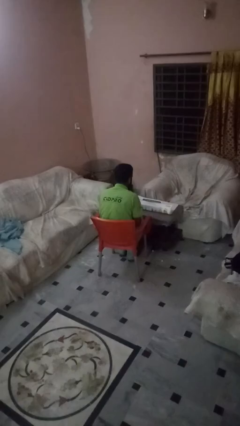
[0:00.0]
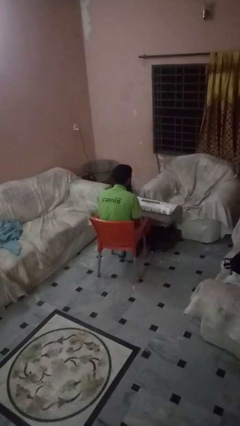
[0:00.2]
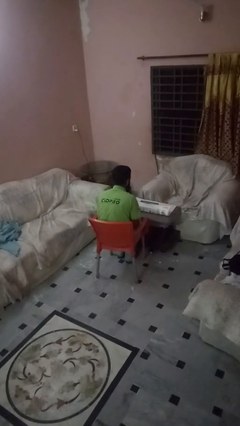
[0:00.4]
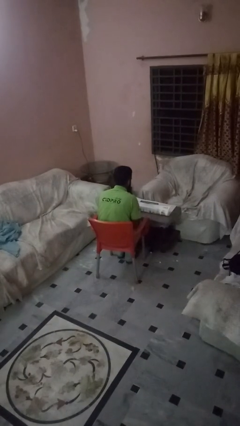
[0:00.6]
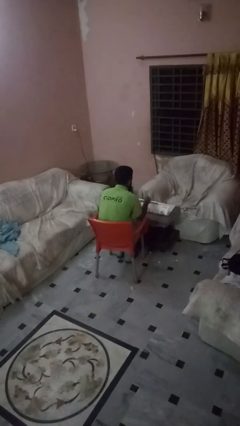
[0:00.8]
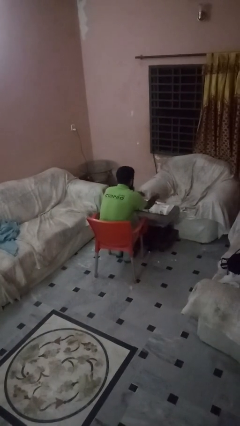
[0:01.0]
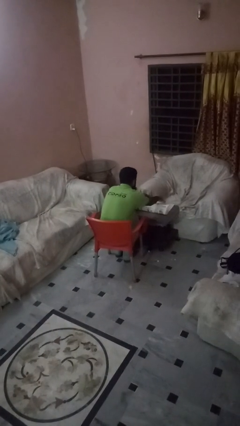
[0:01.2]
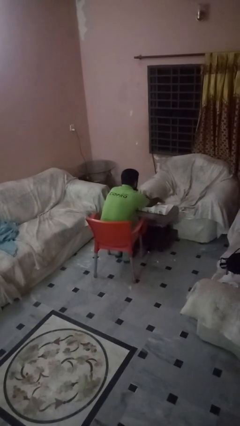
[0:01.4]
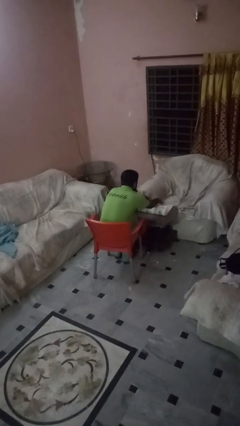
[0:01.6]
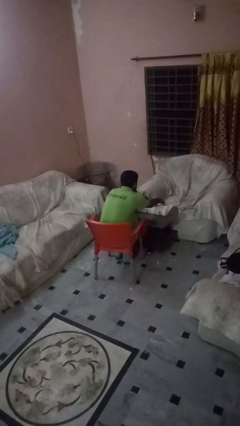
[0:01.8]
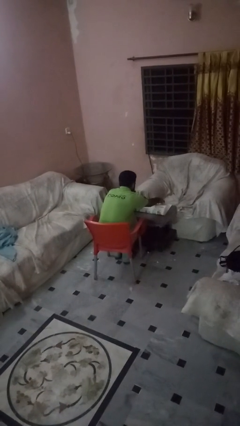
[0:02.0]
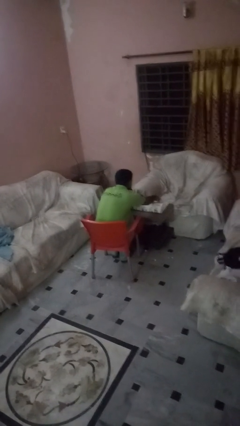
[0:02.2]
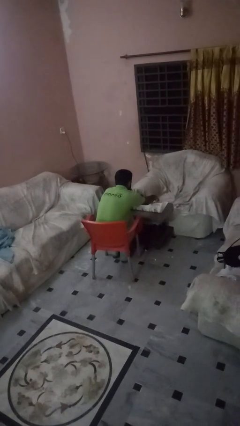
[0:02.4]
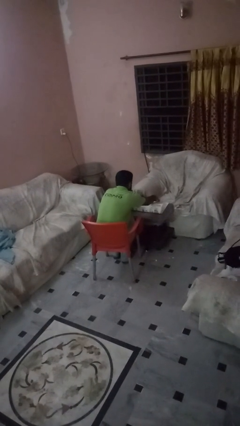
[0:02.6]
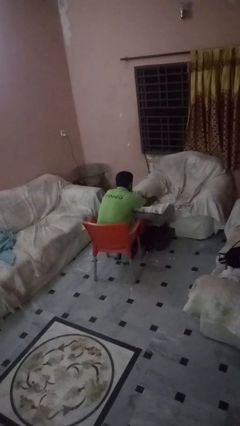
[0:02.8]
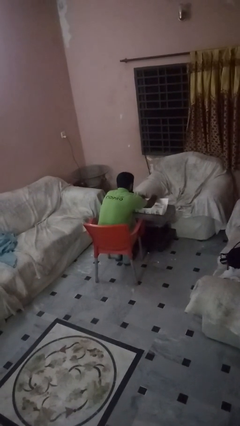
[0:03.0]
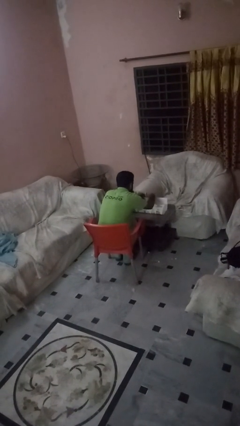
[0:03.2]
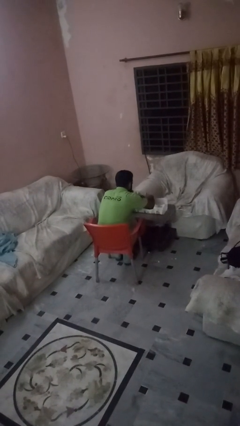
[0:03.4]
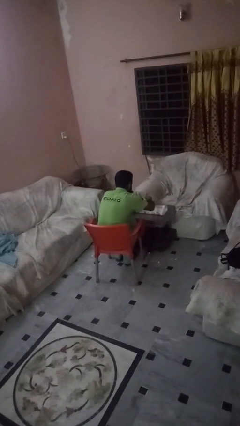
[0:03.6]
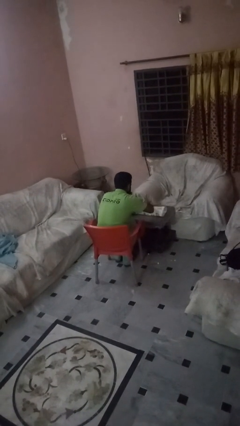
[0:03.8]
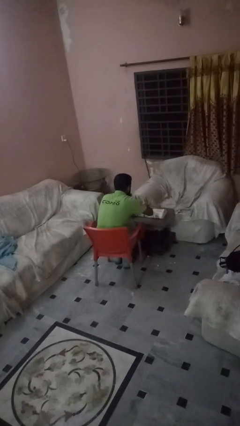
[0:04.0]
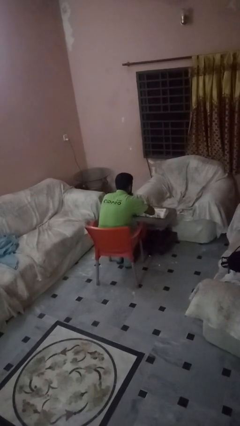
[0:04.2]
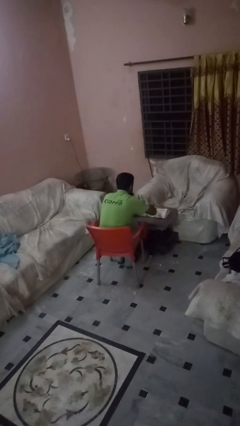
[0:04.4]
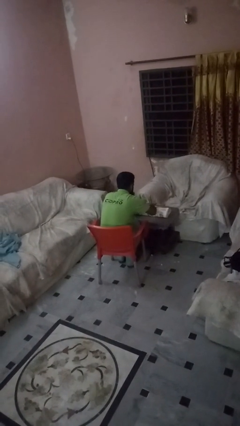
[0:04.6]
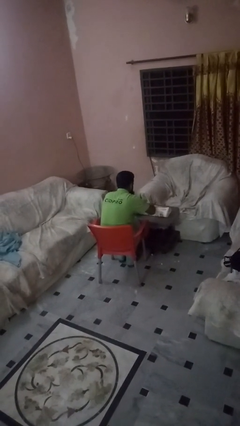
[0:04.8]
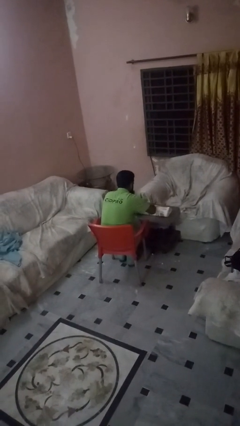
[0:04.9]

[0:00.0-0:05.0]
person wraps box

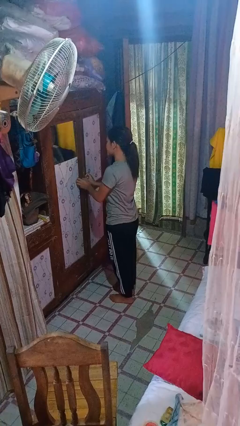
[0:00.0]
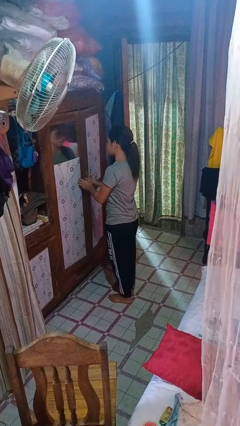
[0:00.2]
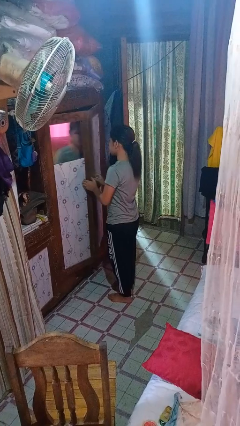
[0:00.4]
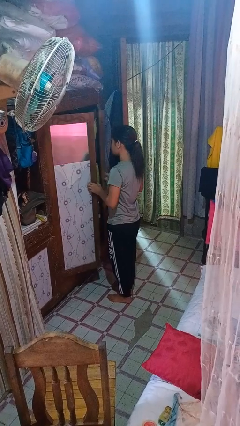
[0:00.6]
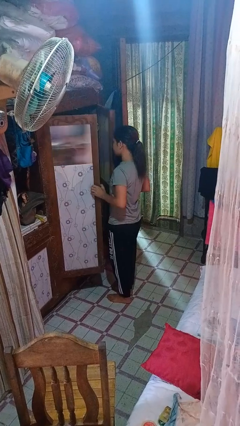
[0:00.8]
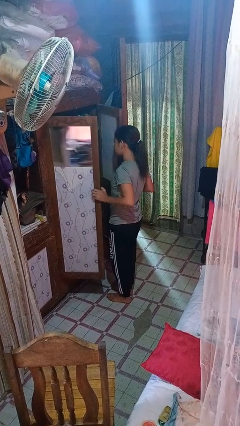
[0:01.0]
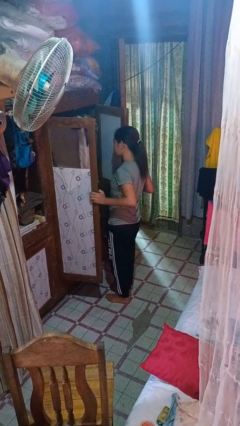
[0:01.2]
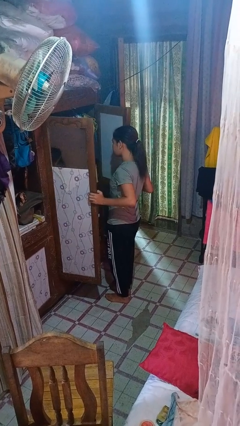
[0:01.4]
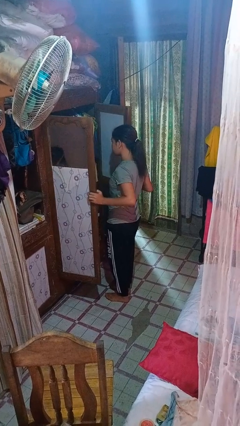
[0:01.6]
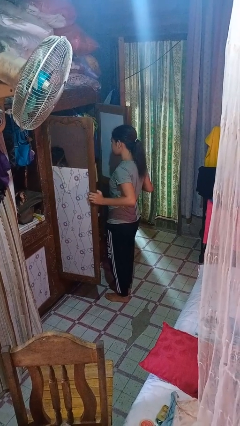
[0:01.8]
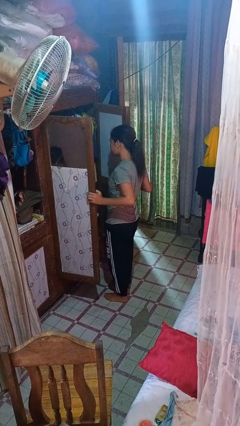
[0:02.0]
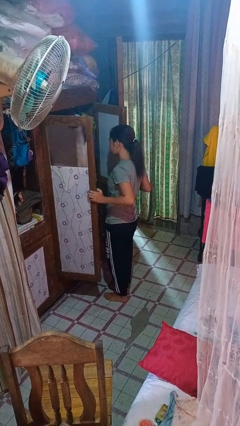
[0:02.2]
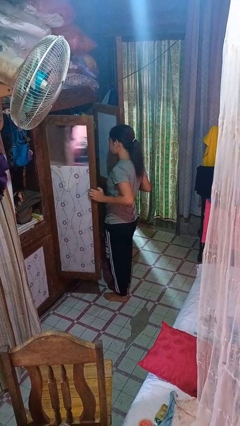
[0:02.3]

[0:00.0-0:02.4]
person opens closet door

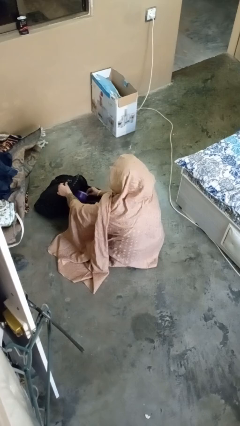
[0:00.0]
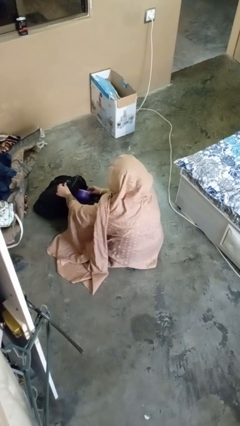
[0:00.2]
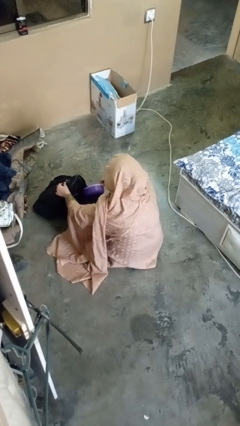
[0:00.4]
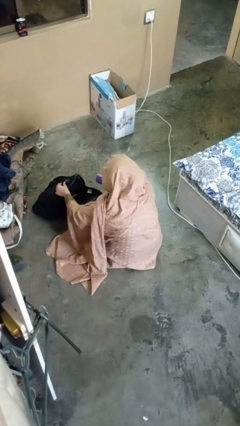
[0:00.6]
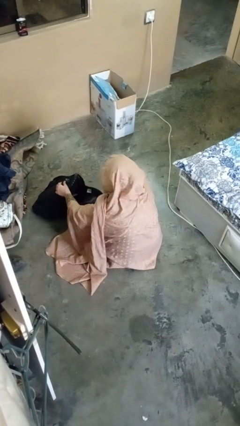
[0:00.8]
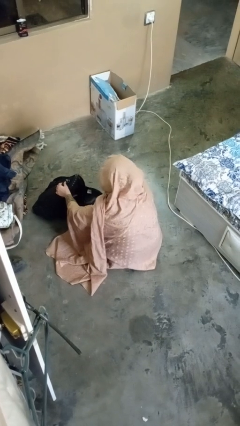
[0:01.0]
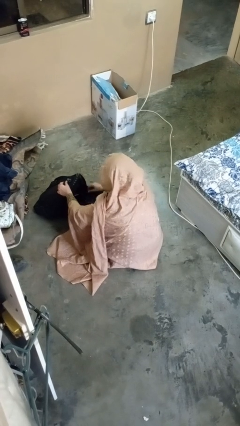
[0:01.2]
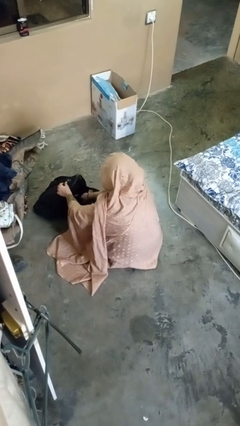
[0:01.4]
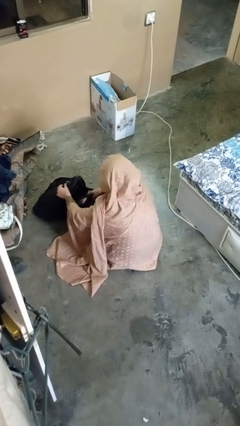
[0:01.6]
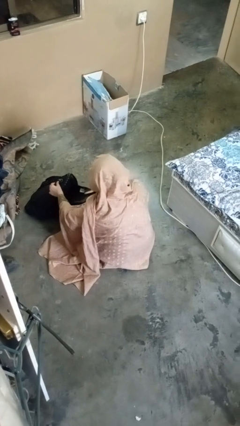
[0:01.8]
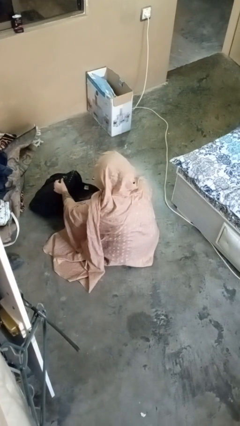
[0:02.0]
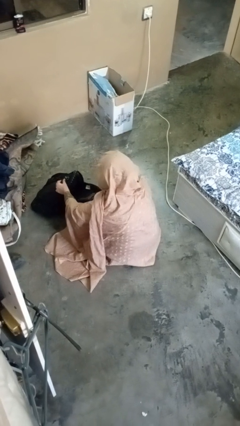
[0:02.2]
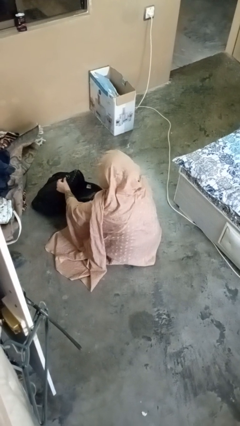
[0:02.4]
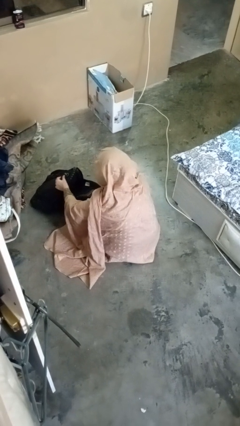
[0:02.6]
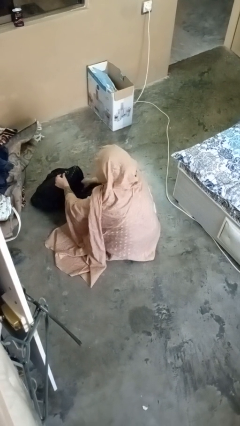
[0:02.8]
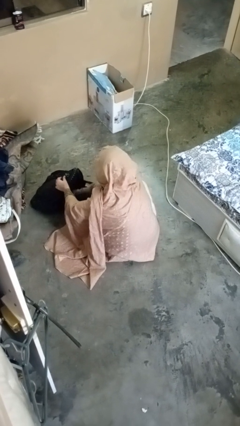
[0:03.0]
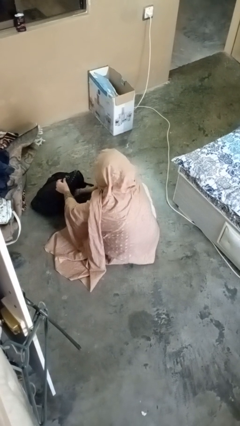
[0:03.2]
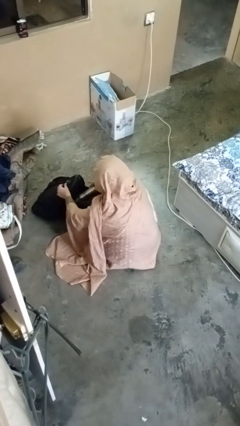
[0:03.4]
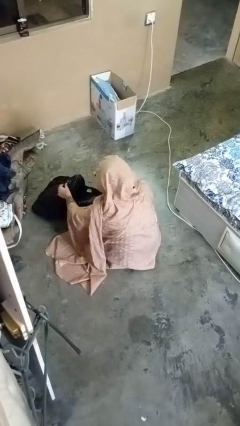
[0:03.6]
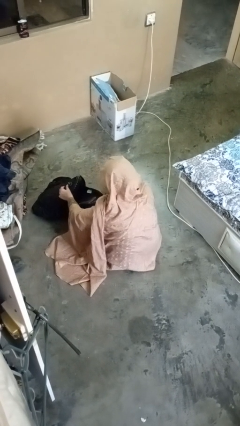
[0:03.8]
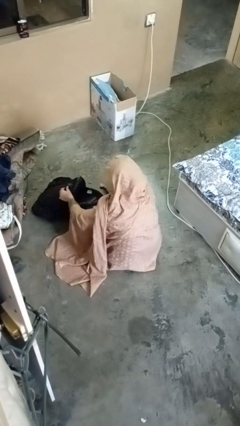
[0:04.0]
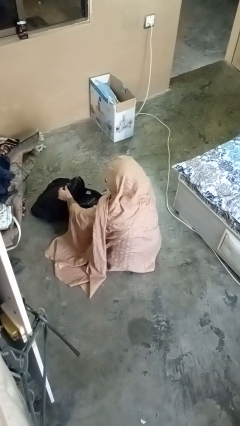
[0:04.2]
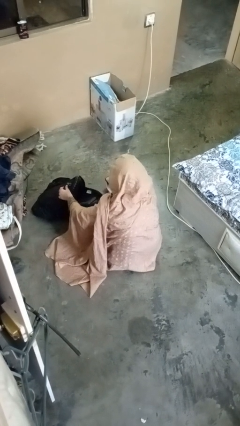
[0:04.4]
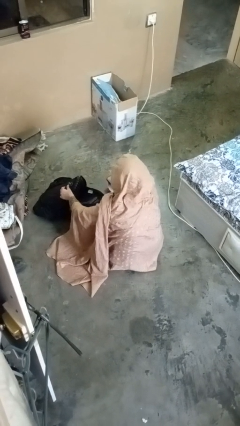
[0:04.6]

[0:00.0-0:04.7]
person takes object from backpack

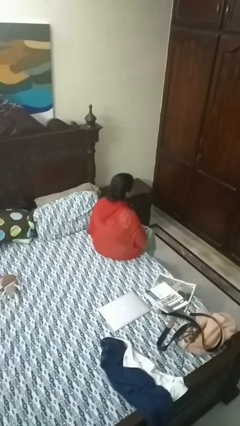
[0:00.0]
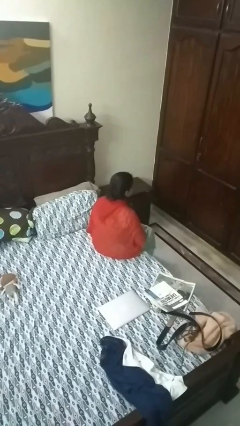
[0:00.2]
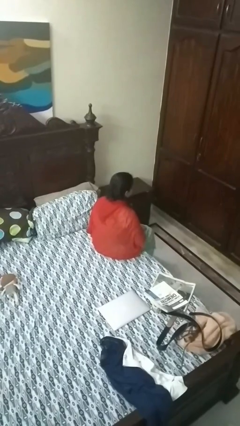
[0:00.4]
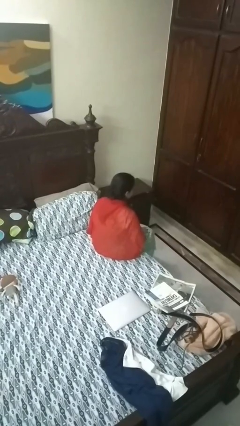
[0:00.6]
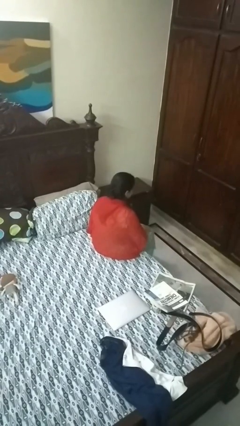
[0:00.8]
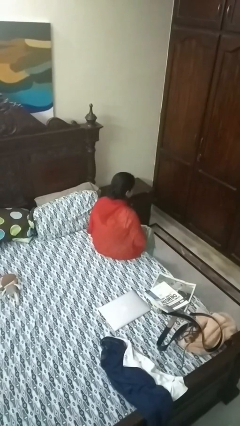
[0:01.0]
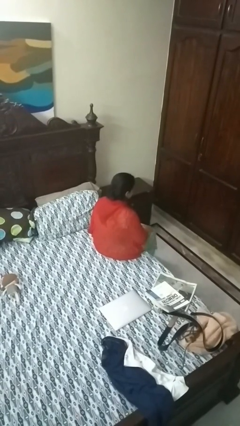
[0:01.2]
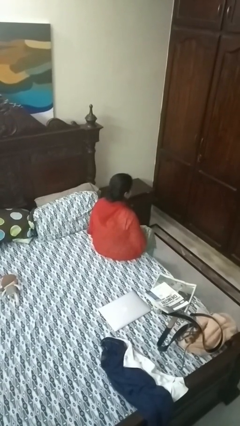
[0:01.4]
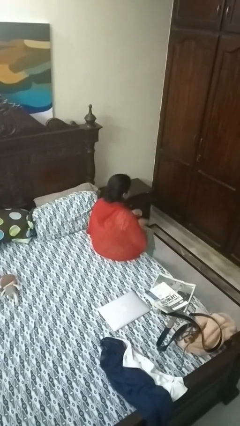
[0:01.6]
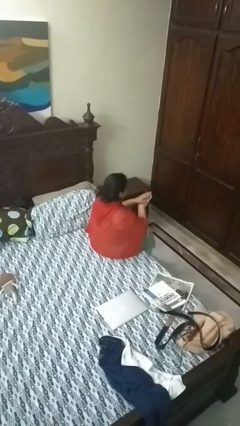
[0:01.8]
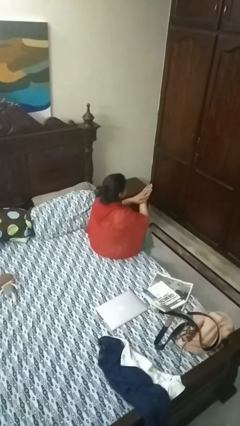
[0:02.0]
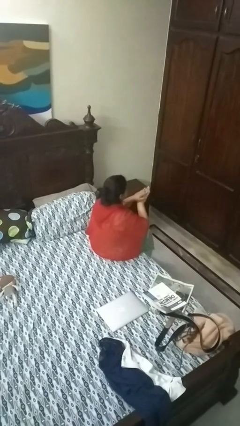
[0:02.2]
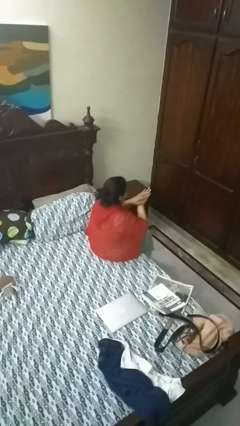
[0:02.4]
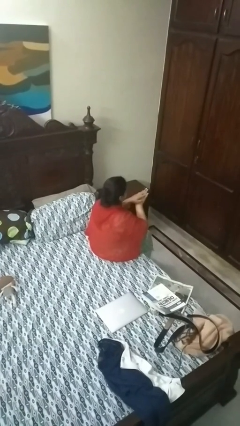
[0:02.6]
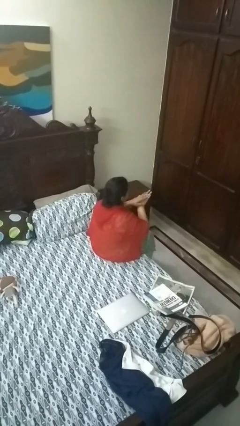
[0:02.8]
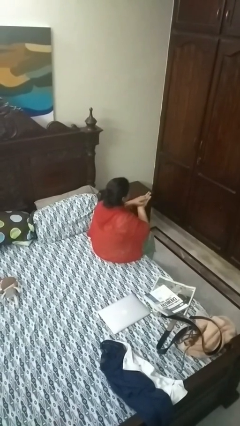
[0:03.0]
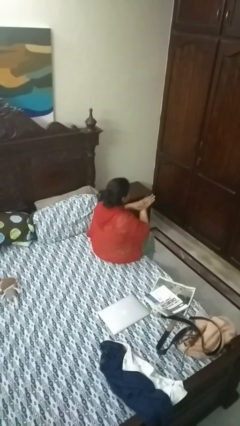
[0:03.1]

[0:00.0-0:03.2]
person looks at hands in lap

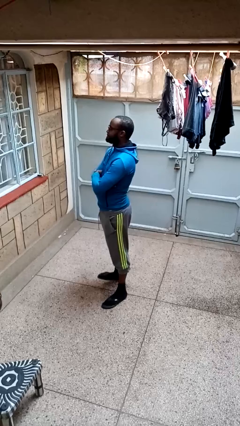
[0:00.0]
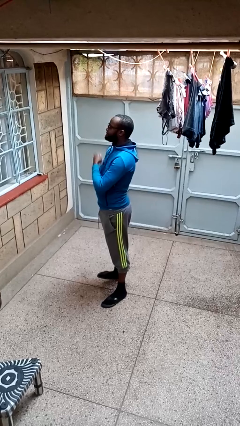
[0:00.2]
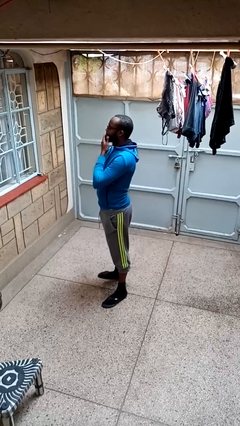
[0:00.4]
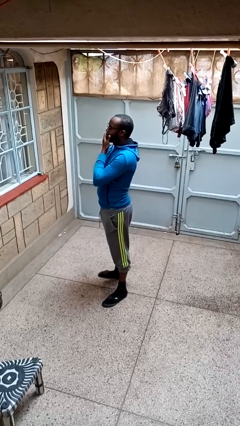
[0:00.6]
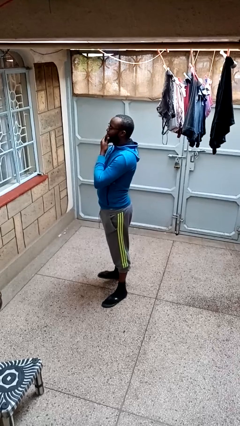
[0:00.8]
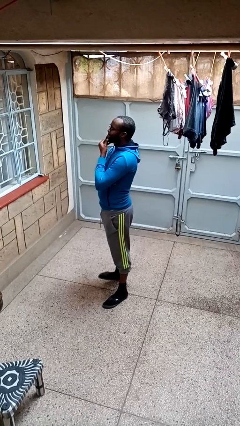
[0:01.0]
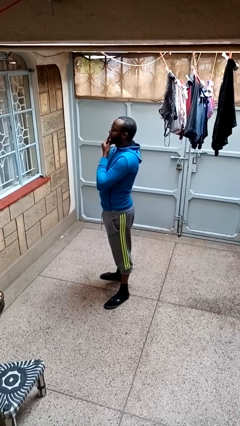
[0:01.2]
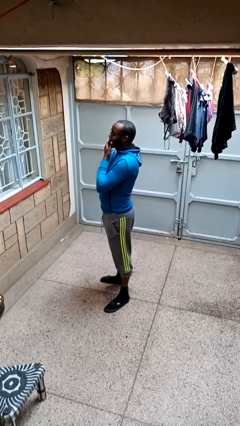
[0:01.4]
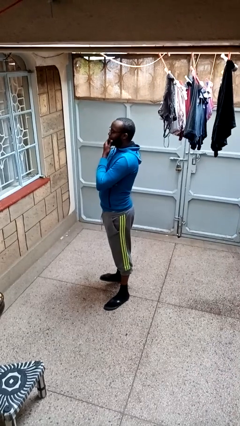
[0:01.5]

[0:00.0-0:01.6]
person strokes chin

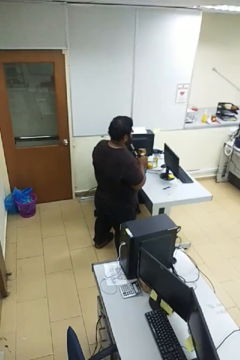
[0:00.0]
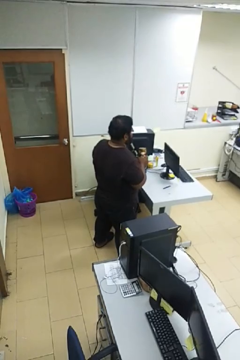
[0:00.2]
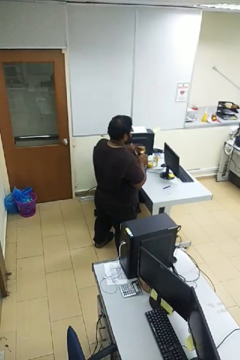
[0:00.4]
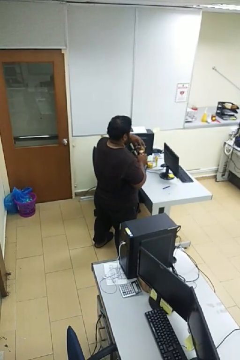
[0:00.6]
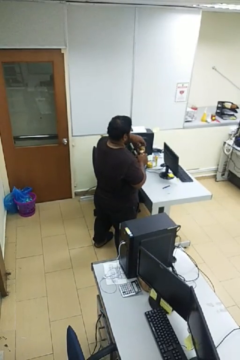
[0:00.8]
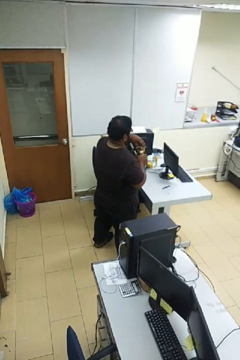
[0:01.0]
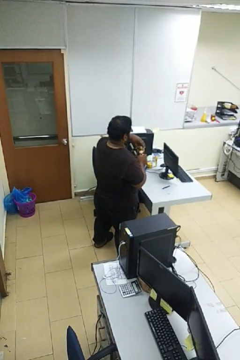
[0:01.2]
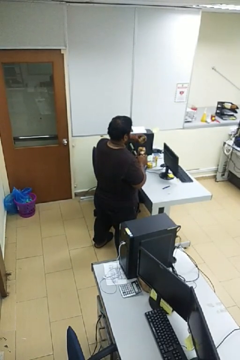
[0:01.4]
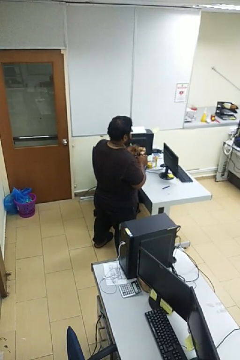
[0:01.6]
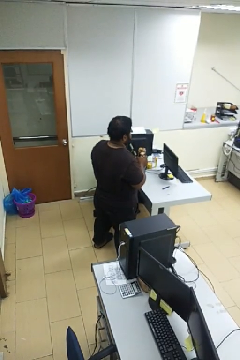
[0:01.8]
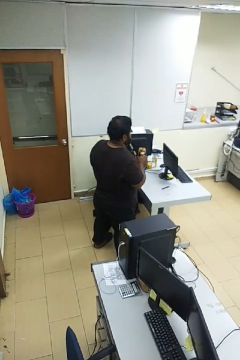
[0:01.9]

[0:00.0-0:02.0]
person opens jar
